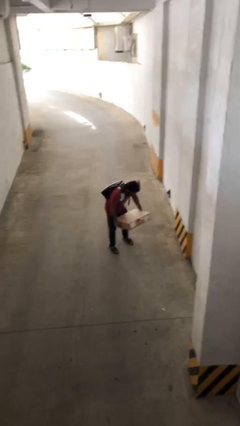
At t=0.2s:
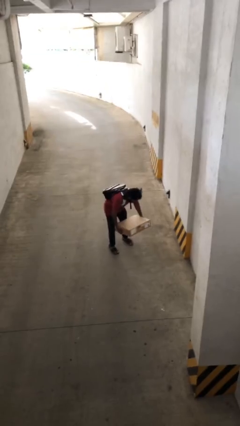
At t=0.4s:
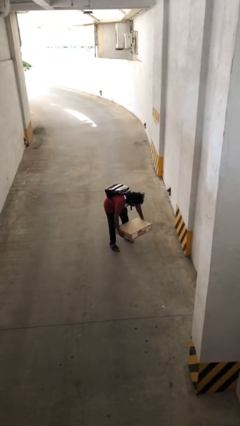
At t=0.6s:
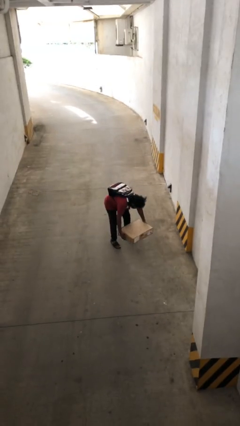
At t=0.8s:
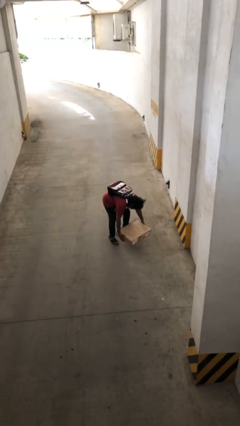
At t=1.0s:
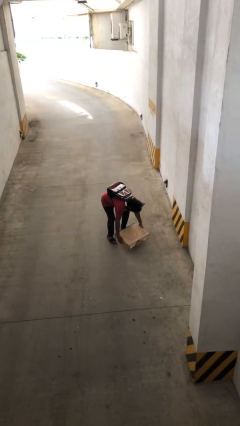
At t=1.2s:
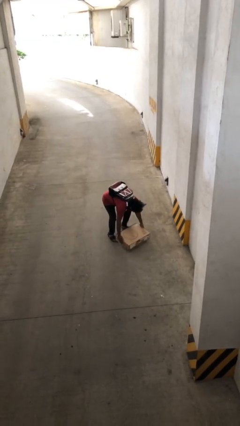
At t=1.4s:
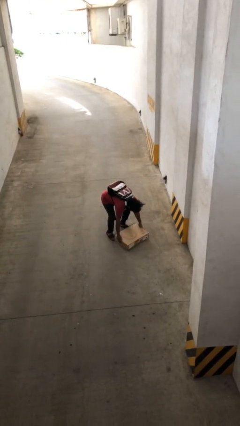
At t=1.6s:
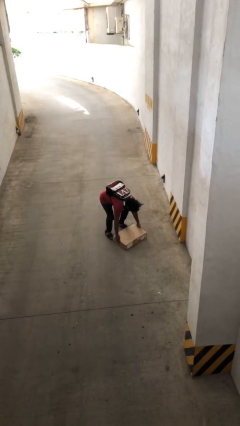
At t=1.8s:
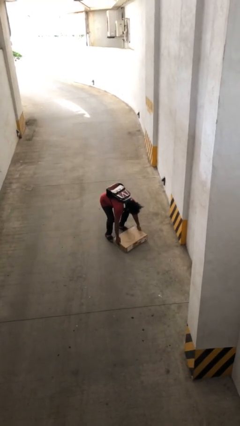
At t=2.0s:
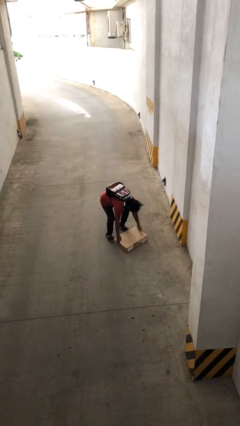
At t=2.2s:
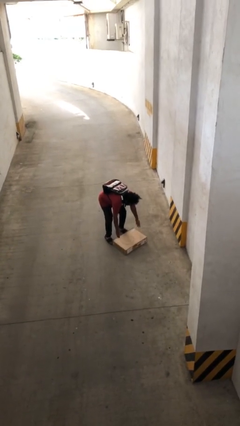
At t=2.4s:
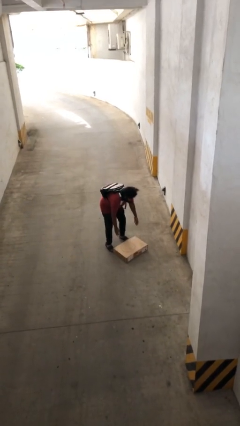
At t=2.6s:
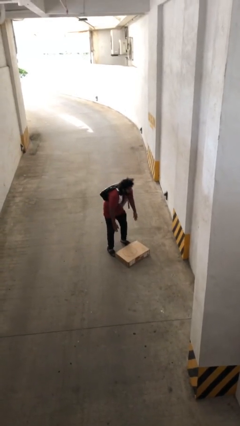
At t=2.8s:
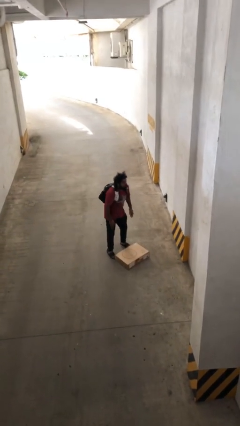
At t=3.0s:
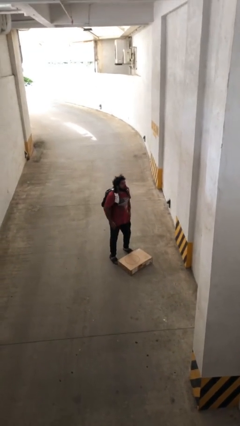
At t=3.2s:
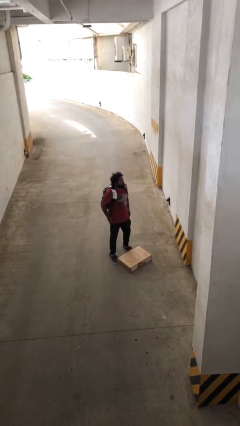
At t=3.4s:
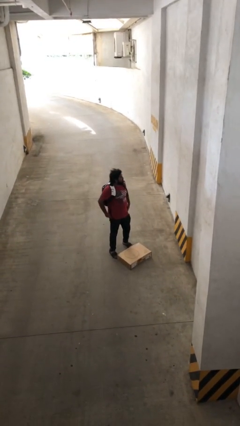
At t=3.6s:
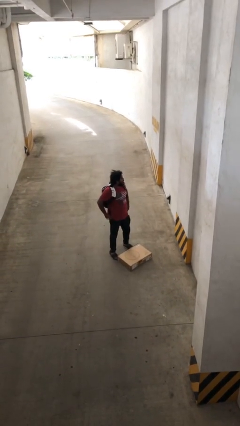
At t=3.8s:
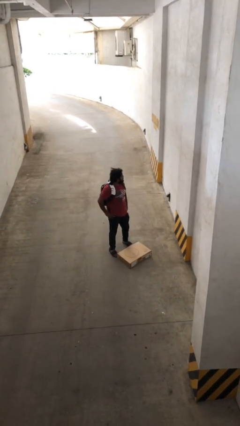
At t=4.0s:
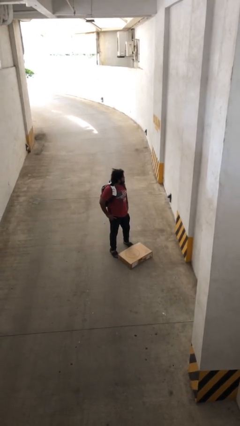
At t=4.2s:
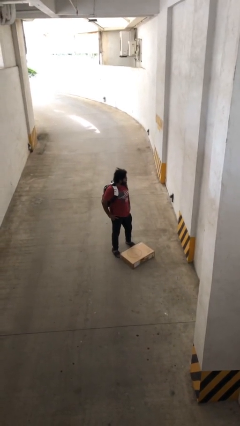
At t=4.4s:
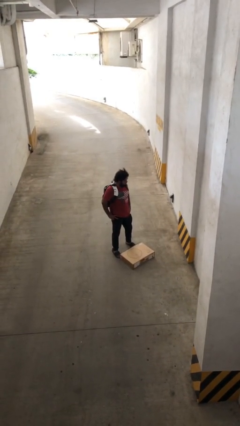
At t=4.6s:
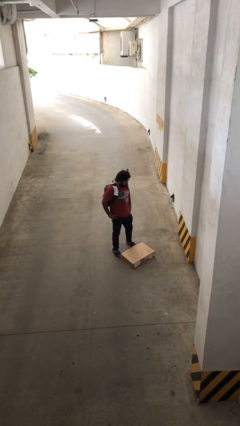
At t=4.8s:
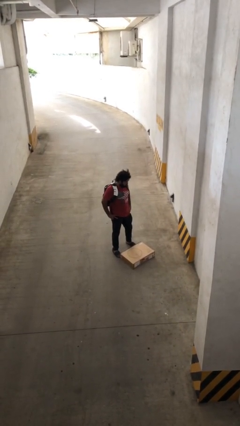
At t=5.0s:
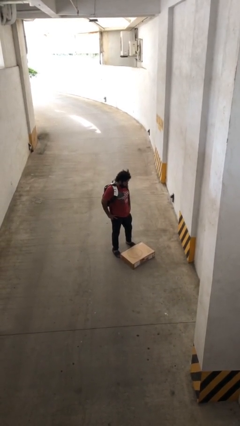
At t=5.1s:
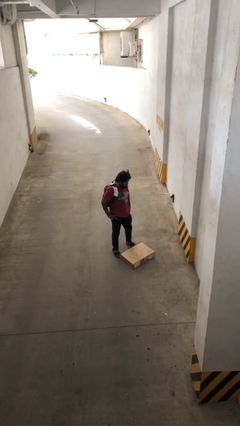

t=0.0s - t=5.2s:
person puts down object on floor

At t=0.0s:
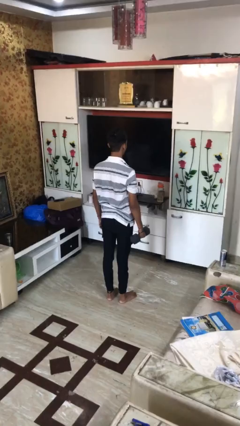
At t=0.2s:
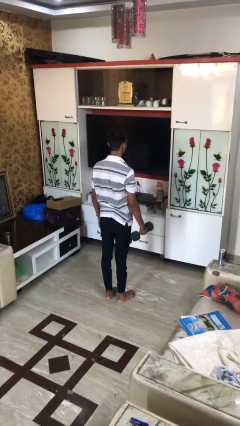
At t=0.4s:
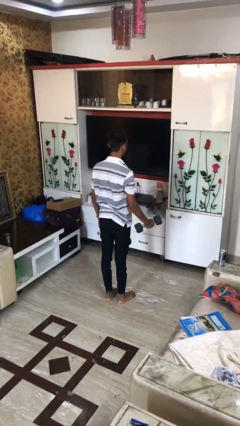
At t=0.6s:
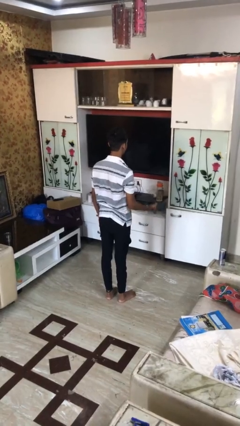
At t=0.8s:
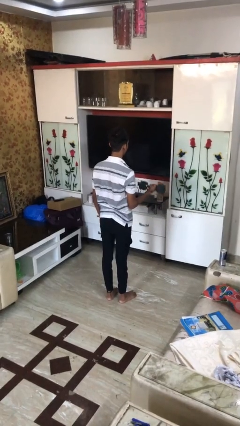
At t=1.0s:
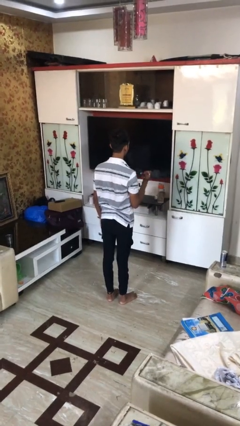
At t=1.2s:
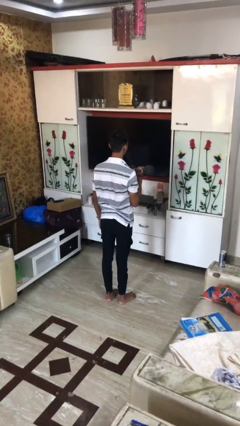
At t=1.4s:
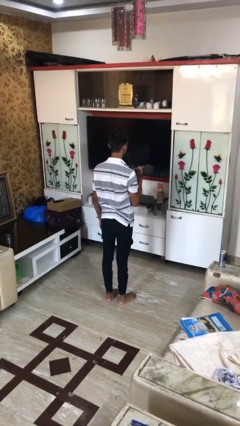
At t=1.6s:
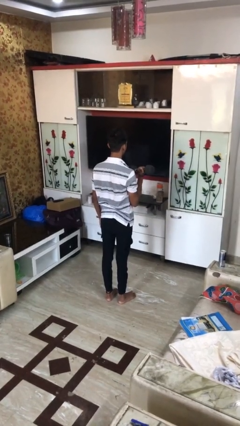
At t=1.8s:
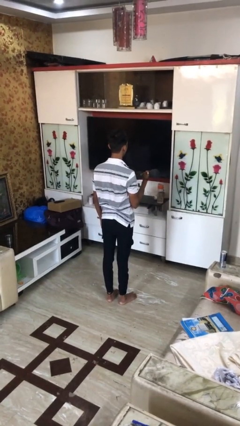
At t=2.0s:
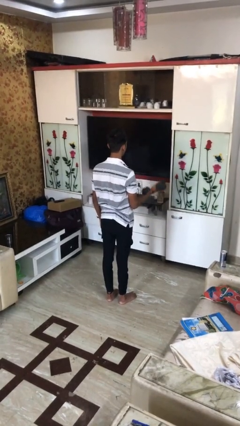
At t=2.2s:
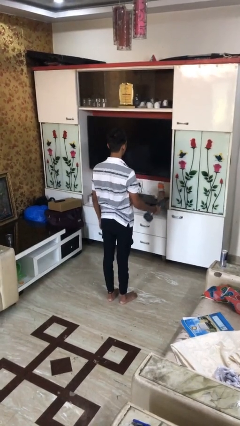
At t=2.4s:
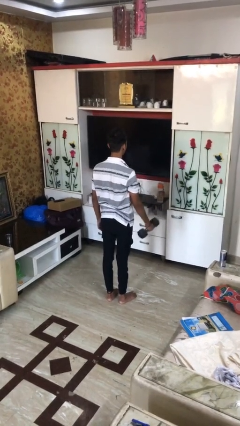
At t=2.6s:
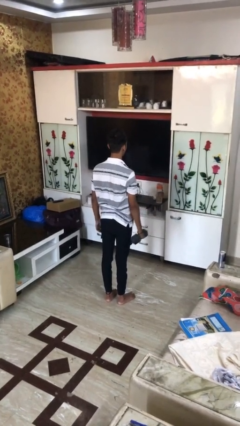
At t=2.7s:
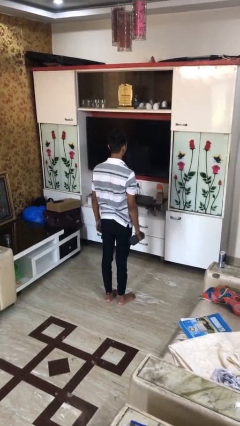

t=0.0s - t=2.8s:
person lifts dumbbells

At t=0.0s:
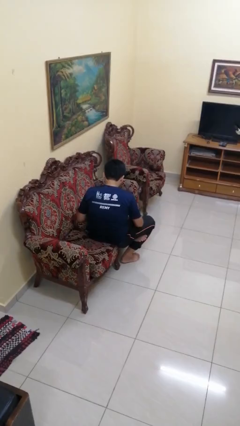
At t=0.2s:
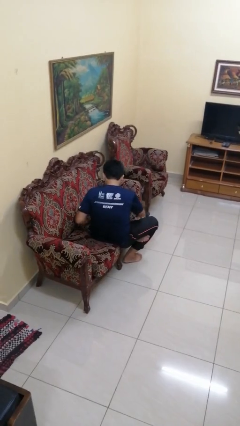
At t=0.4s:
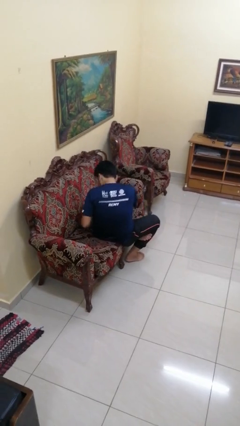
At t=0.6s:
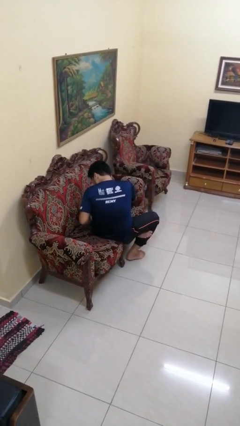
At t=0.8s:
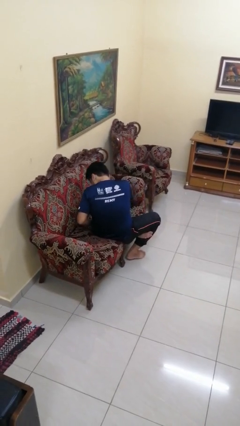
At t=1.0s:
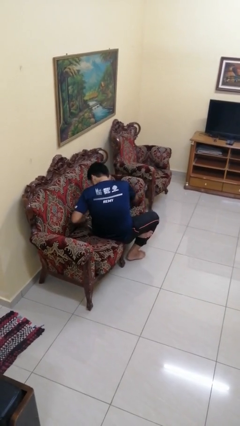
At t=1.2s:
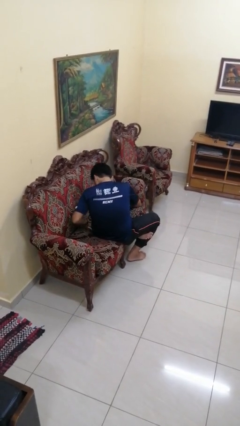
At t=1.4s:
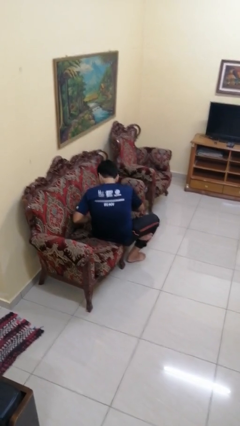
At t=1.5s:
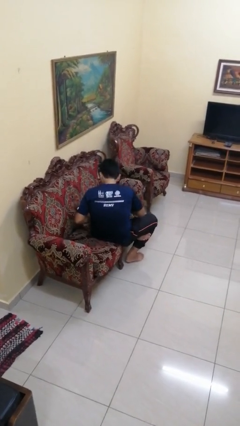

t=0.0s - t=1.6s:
person searches in couch

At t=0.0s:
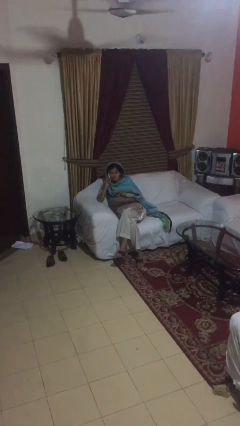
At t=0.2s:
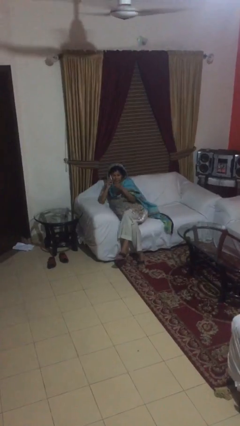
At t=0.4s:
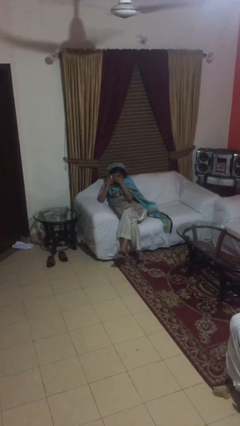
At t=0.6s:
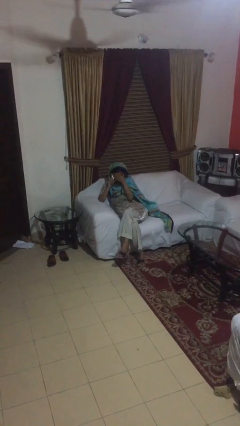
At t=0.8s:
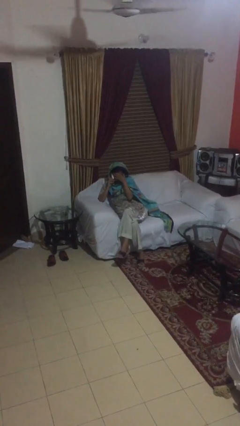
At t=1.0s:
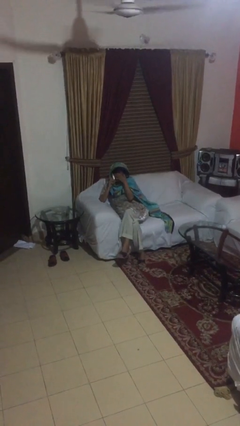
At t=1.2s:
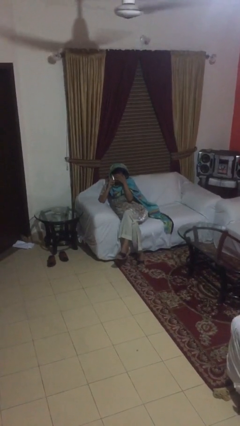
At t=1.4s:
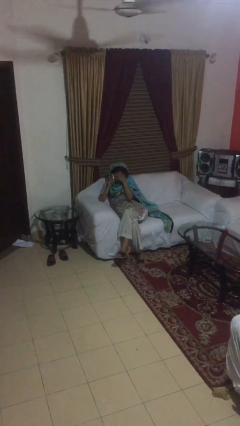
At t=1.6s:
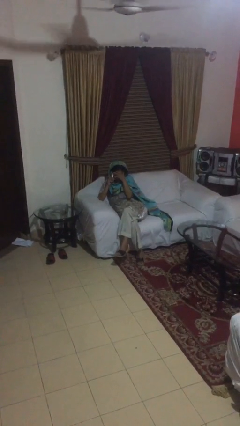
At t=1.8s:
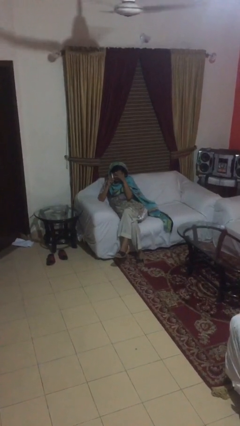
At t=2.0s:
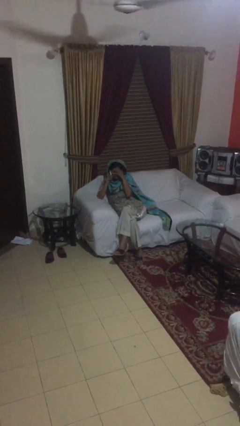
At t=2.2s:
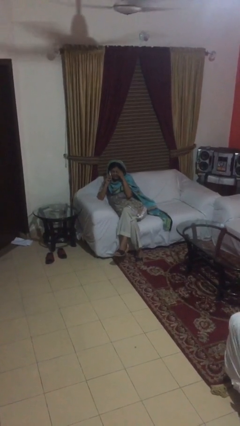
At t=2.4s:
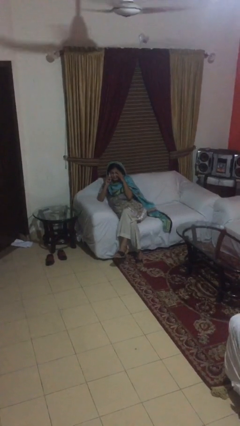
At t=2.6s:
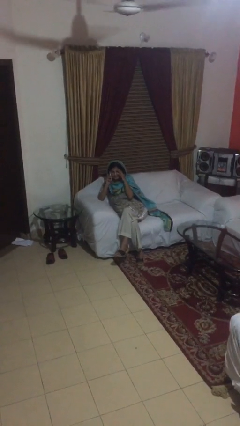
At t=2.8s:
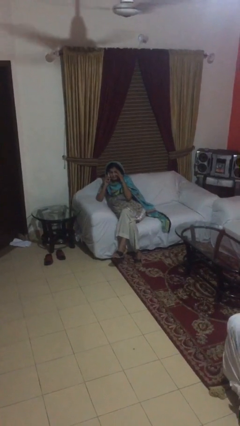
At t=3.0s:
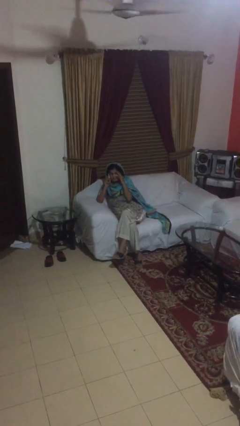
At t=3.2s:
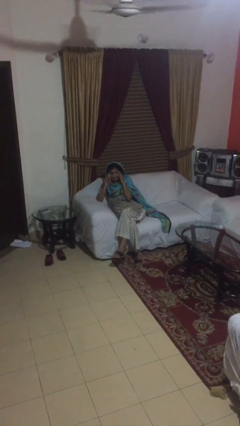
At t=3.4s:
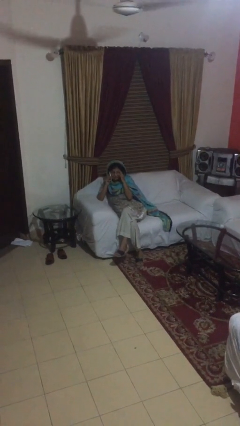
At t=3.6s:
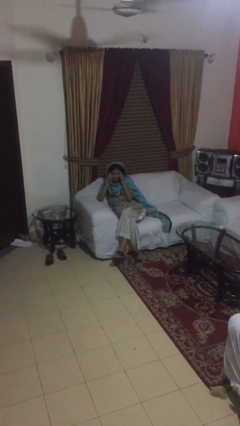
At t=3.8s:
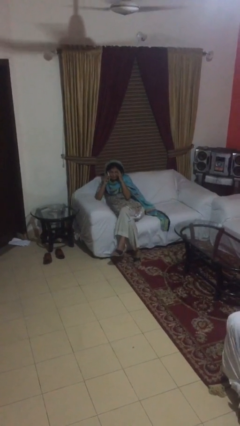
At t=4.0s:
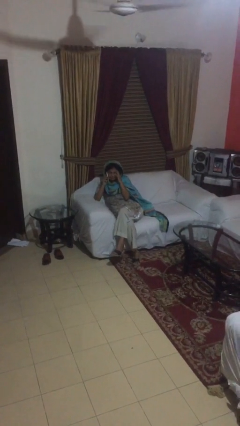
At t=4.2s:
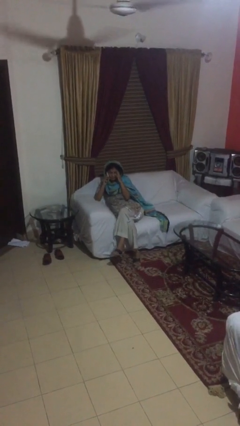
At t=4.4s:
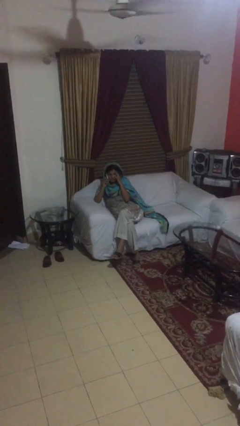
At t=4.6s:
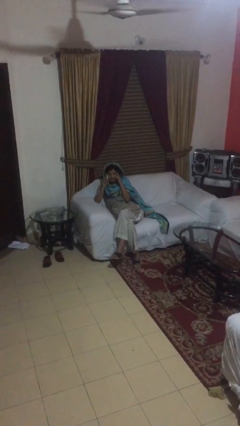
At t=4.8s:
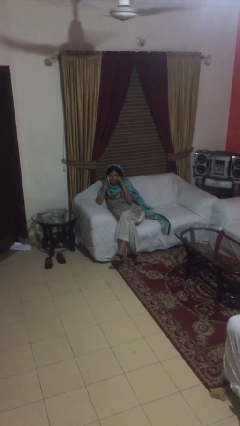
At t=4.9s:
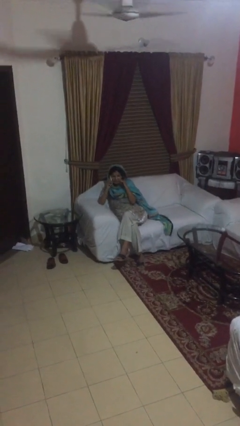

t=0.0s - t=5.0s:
person talks on phone

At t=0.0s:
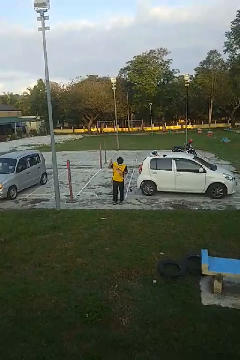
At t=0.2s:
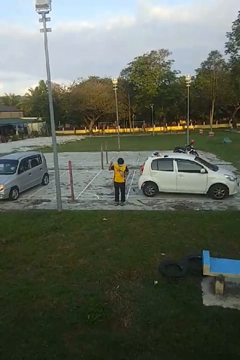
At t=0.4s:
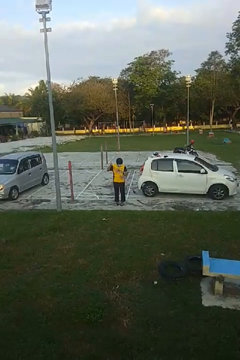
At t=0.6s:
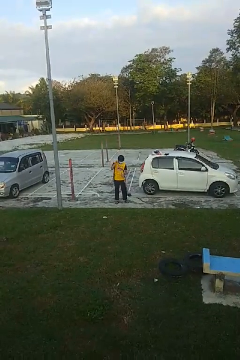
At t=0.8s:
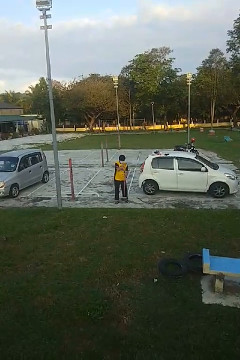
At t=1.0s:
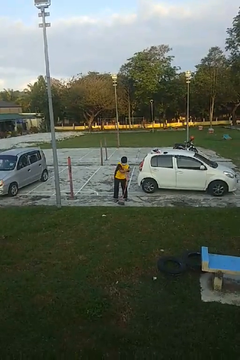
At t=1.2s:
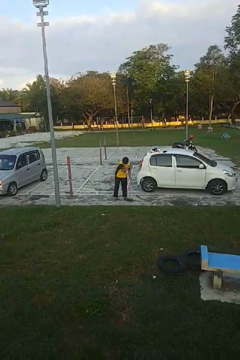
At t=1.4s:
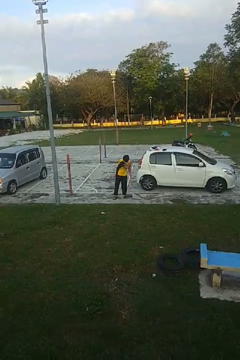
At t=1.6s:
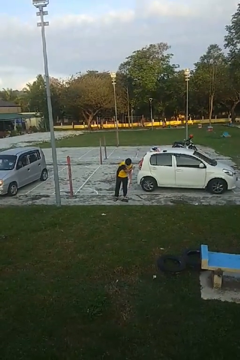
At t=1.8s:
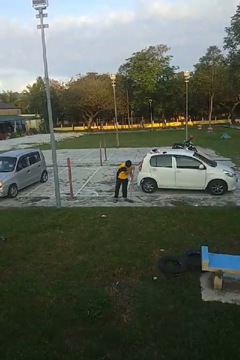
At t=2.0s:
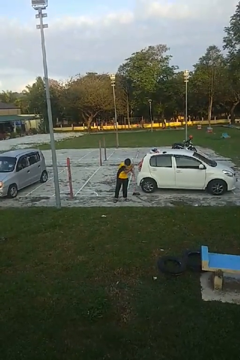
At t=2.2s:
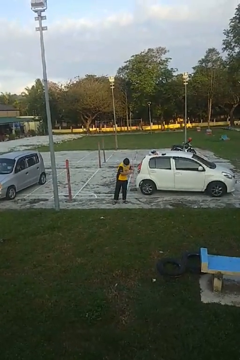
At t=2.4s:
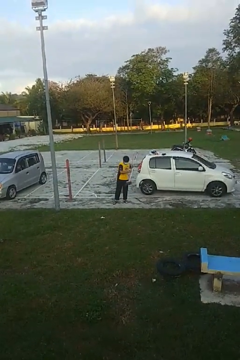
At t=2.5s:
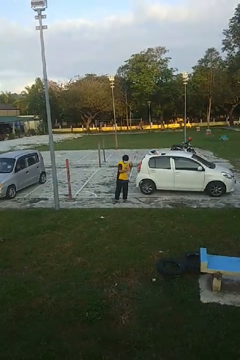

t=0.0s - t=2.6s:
person sweeps floor

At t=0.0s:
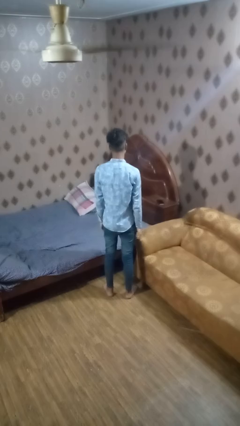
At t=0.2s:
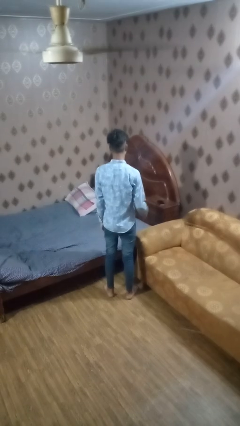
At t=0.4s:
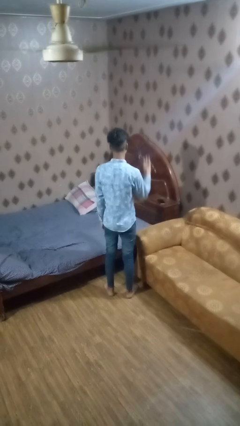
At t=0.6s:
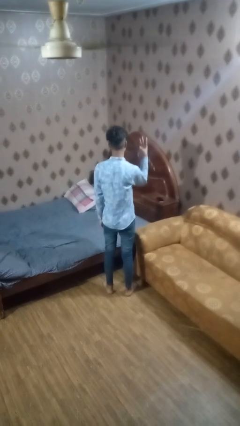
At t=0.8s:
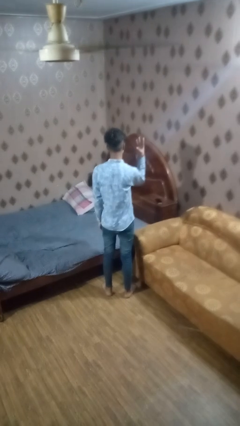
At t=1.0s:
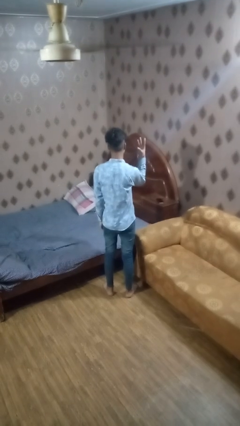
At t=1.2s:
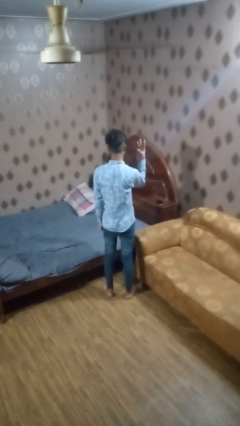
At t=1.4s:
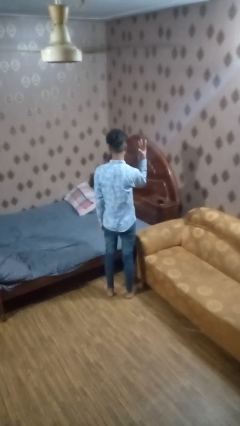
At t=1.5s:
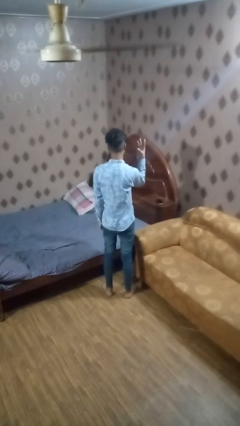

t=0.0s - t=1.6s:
person gestures number three
